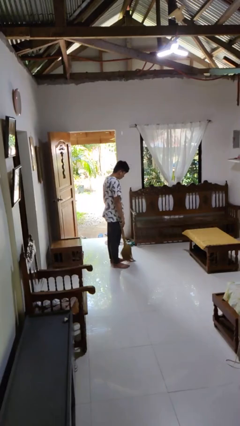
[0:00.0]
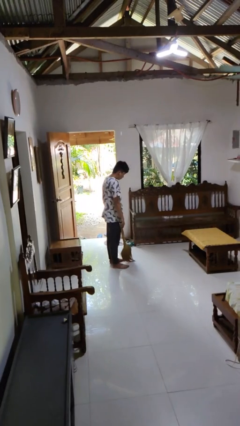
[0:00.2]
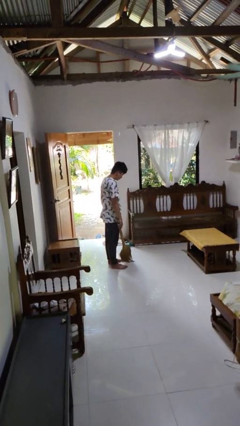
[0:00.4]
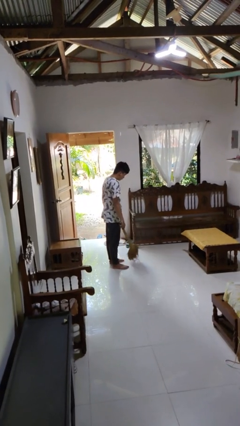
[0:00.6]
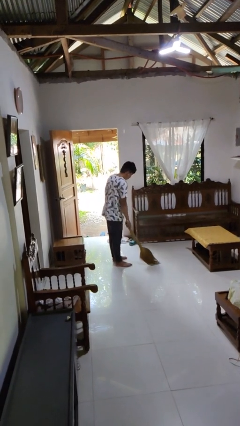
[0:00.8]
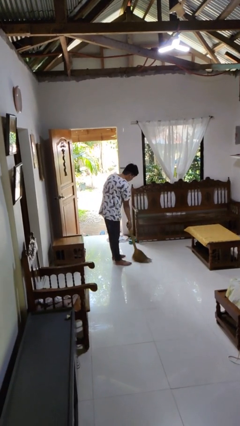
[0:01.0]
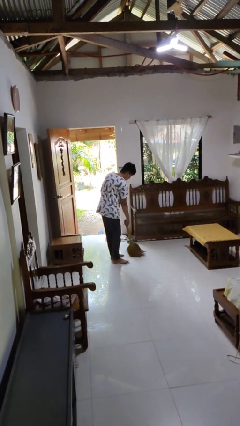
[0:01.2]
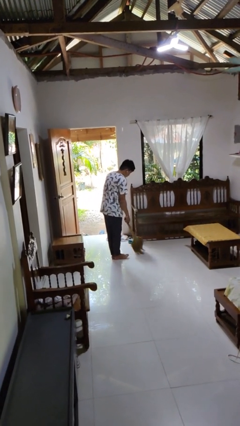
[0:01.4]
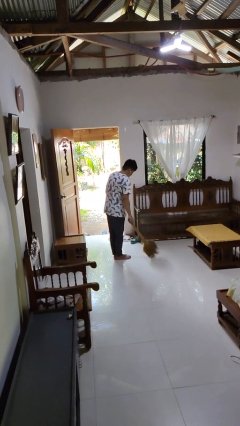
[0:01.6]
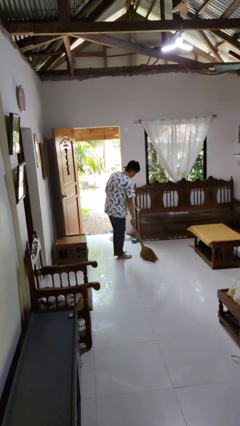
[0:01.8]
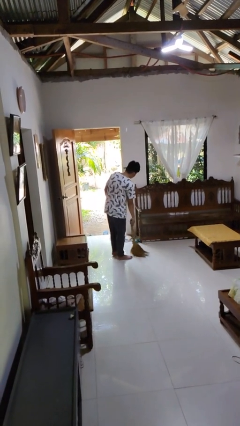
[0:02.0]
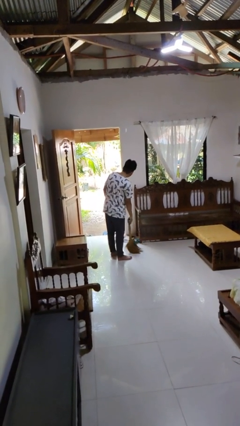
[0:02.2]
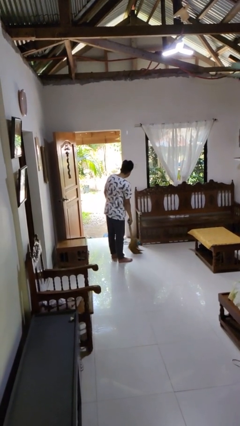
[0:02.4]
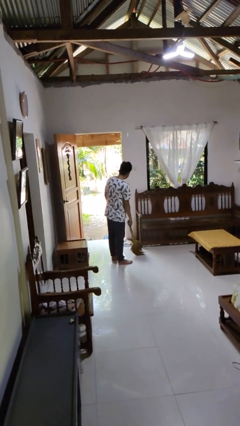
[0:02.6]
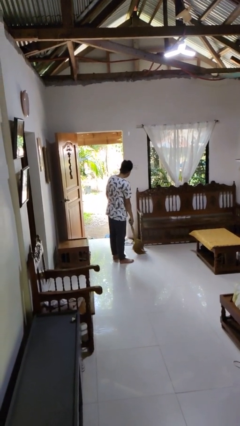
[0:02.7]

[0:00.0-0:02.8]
person sweeps floor

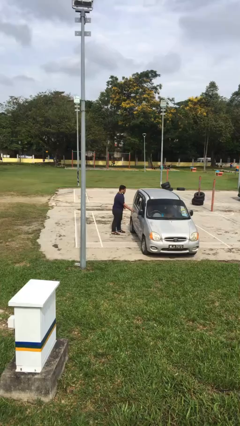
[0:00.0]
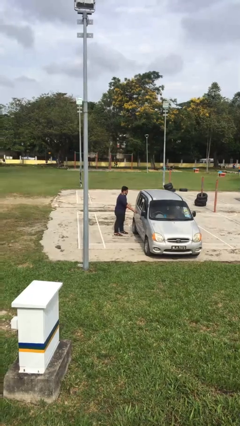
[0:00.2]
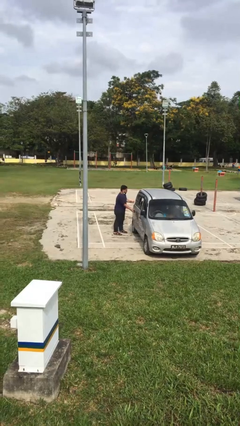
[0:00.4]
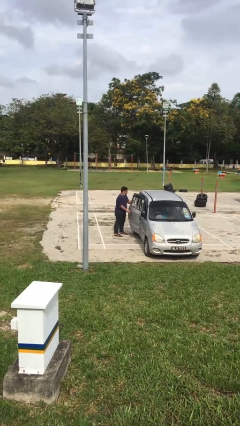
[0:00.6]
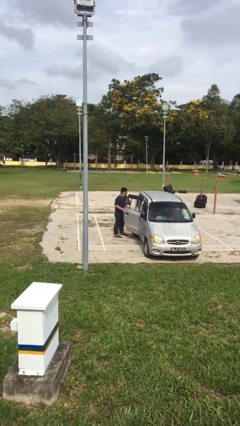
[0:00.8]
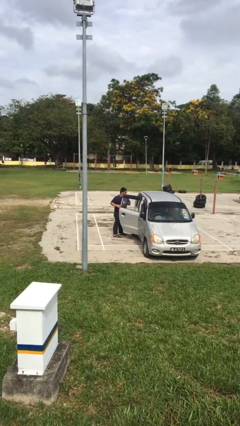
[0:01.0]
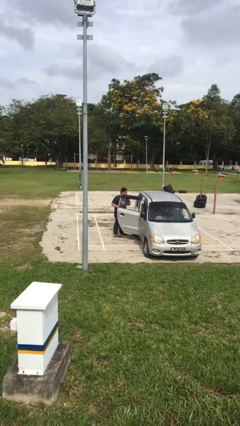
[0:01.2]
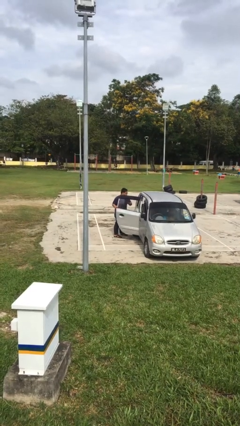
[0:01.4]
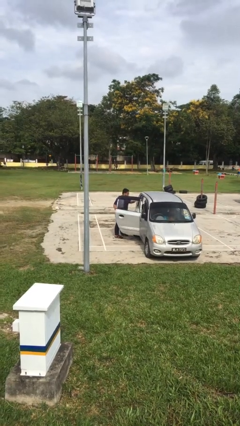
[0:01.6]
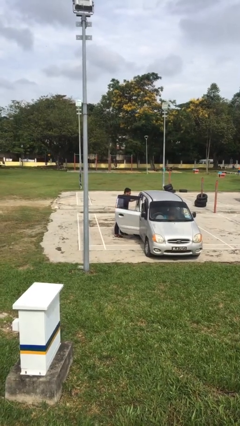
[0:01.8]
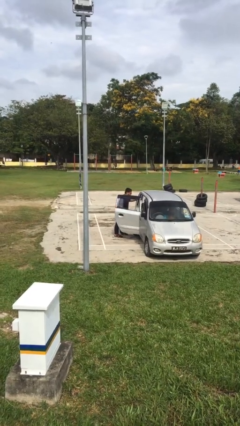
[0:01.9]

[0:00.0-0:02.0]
person opens car door

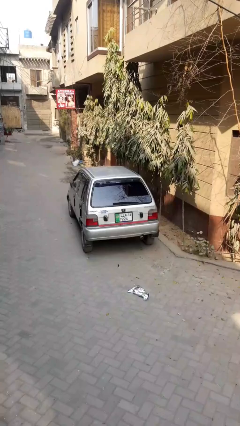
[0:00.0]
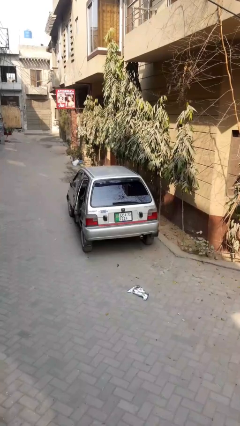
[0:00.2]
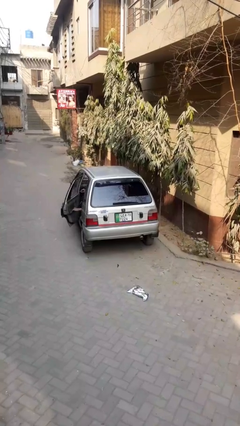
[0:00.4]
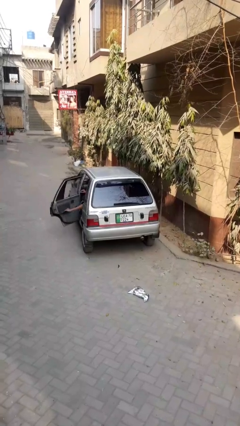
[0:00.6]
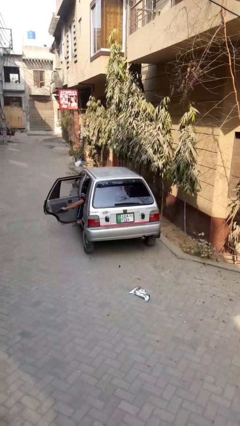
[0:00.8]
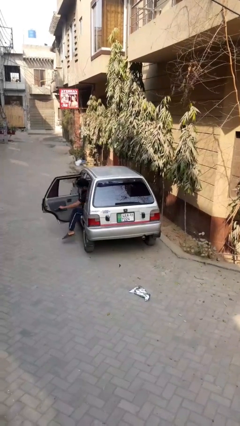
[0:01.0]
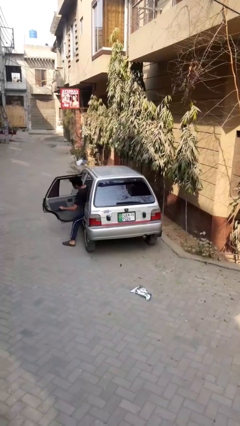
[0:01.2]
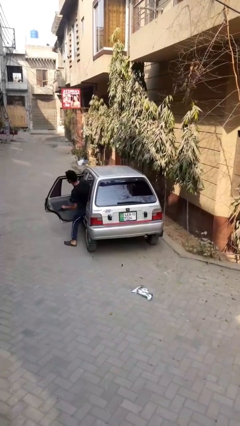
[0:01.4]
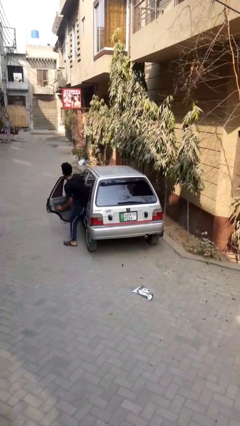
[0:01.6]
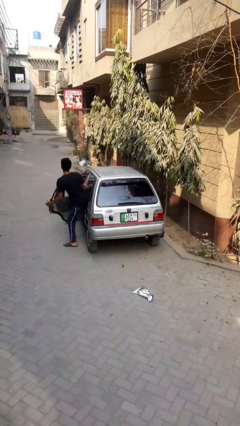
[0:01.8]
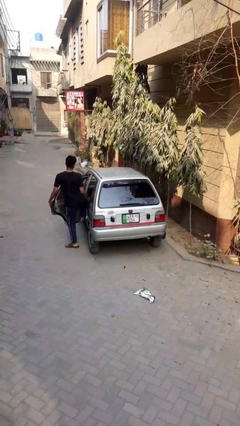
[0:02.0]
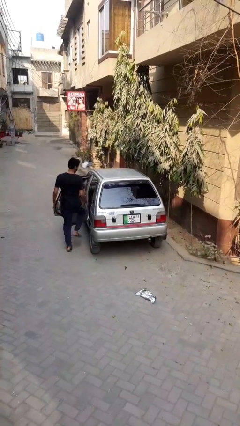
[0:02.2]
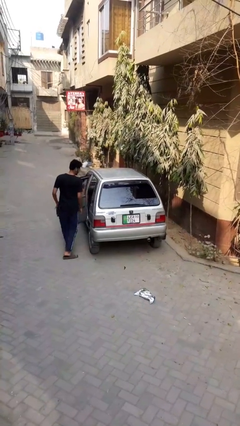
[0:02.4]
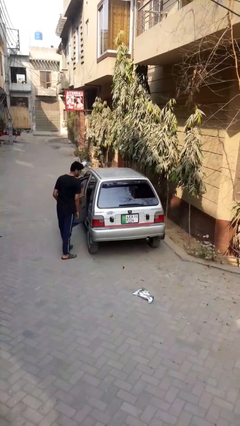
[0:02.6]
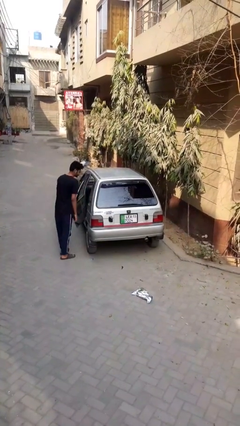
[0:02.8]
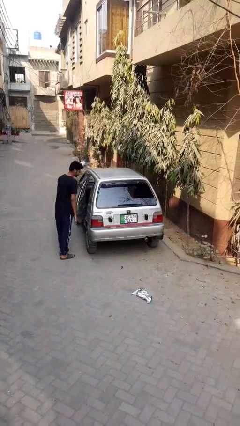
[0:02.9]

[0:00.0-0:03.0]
car drops off person

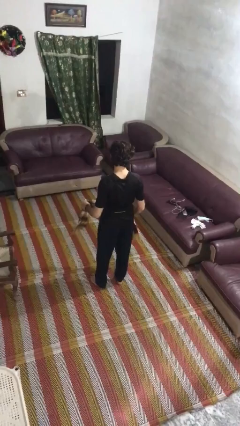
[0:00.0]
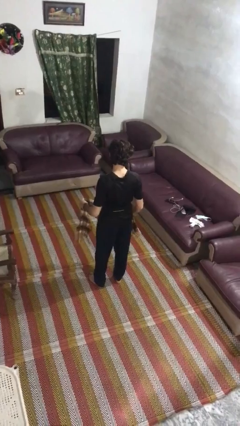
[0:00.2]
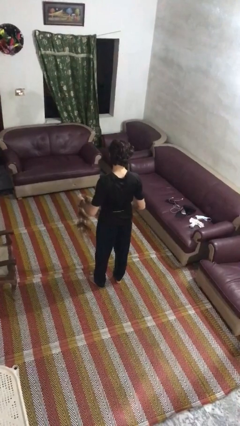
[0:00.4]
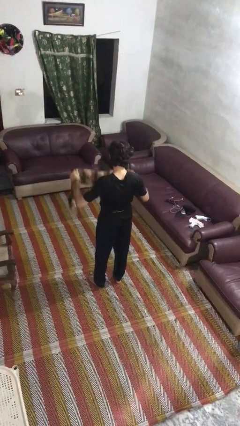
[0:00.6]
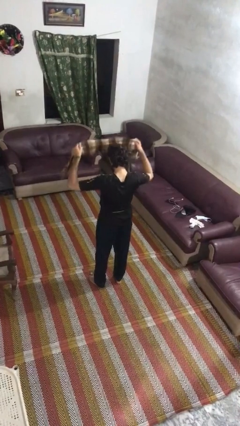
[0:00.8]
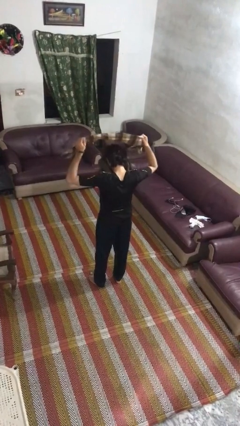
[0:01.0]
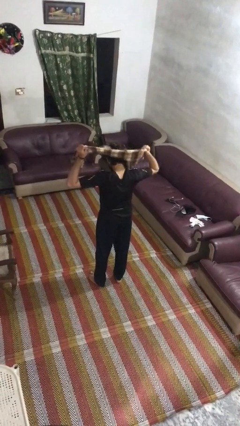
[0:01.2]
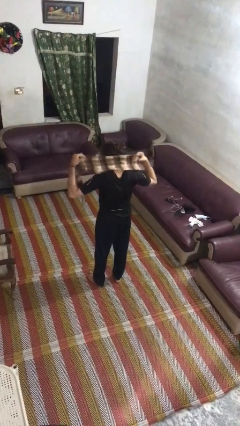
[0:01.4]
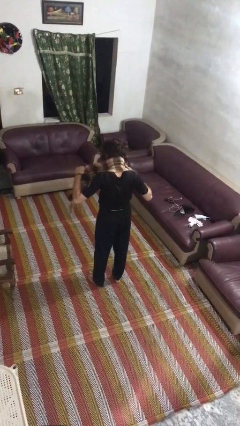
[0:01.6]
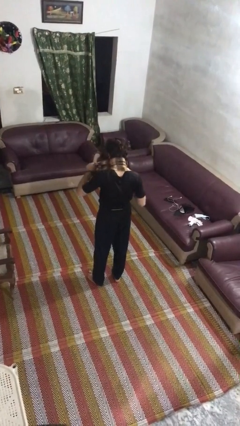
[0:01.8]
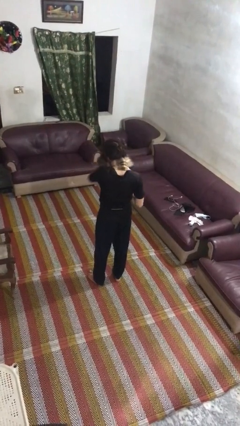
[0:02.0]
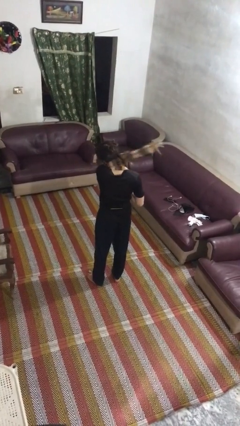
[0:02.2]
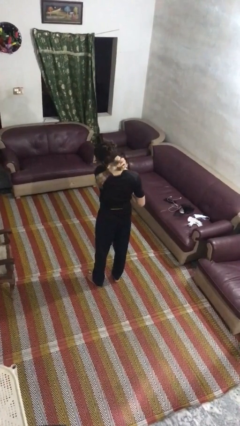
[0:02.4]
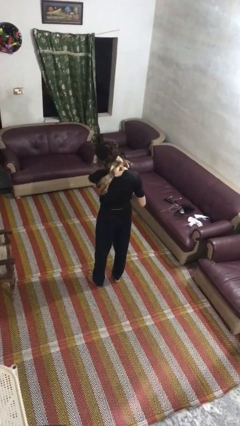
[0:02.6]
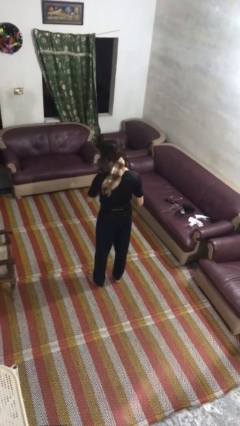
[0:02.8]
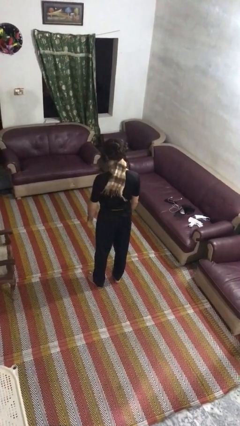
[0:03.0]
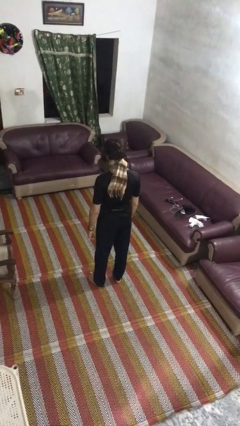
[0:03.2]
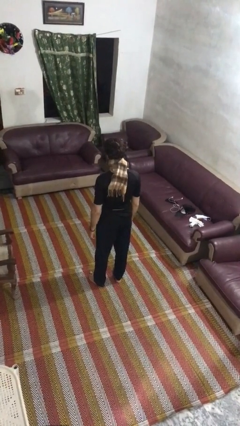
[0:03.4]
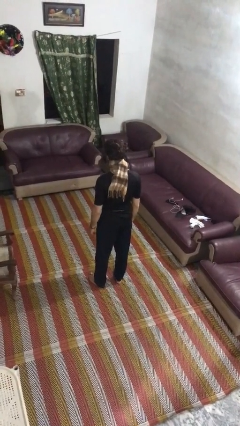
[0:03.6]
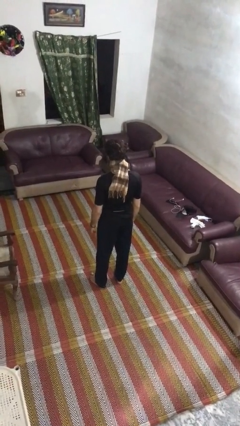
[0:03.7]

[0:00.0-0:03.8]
person puts on scarf

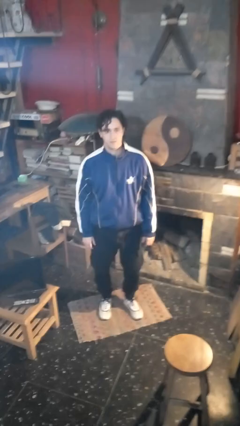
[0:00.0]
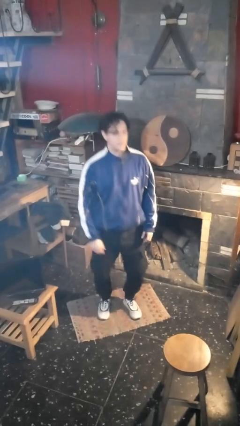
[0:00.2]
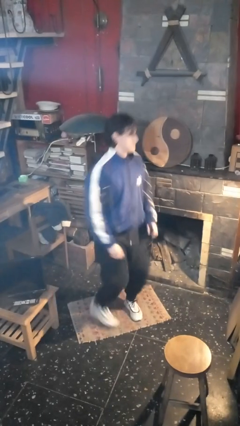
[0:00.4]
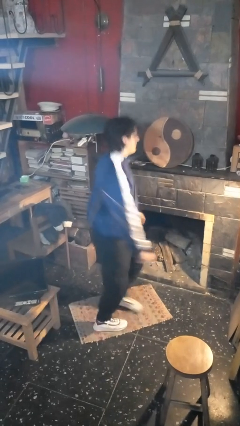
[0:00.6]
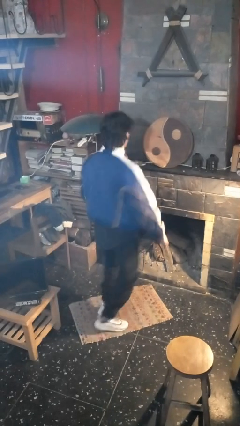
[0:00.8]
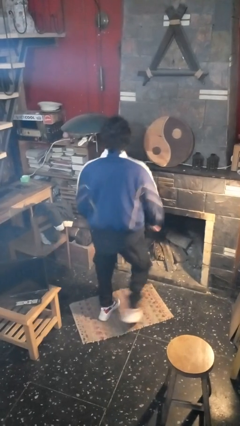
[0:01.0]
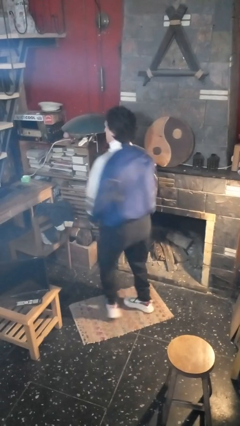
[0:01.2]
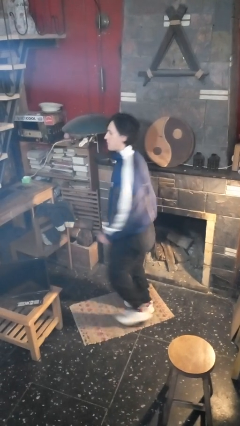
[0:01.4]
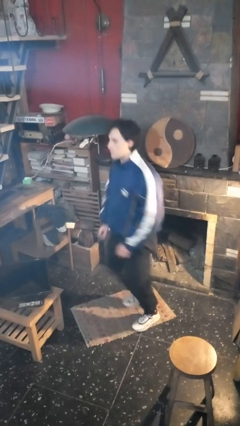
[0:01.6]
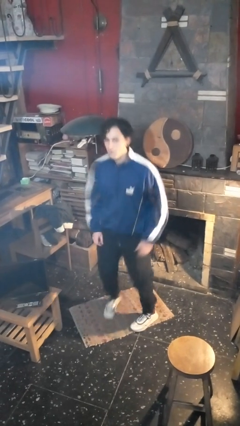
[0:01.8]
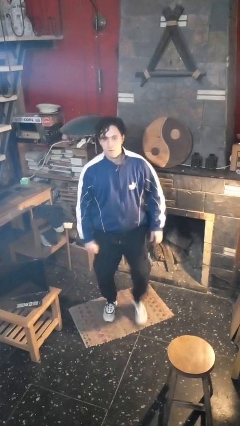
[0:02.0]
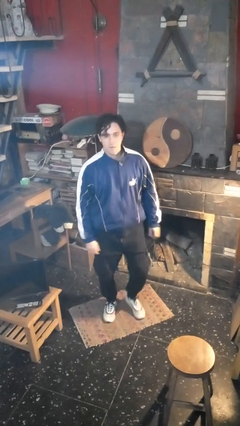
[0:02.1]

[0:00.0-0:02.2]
person twirls

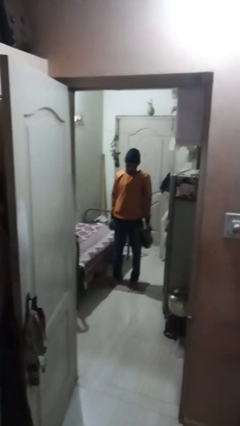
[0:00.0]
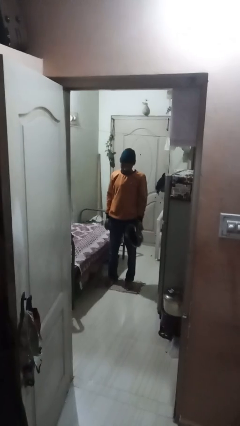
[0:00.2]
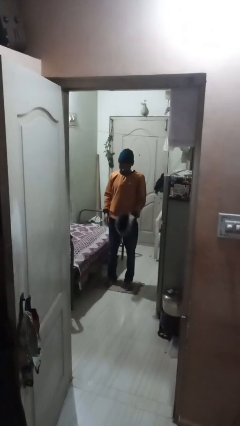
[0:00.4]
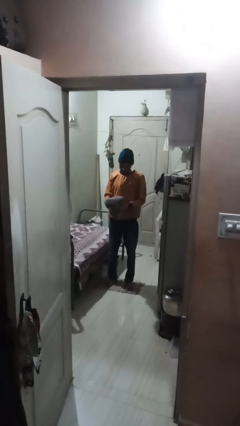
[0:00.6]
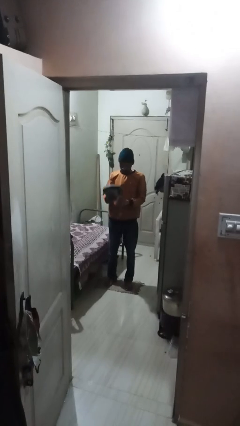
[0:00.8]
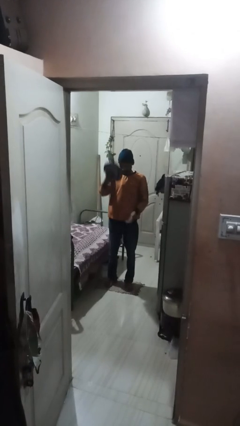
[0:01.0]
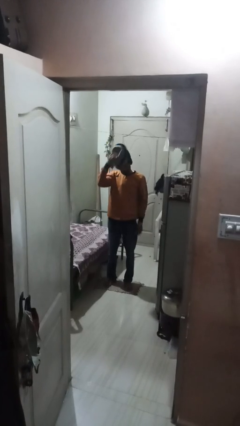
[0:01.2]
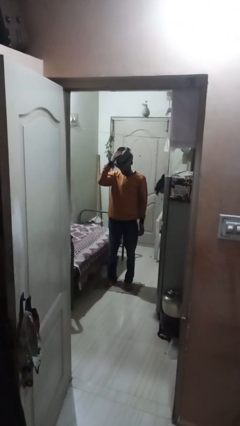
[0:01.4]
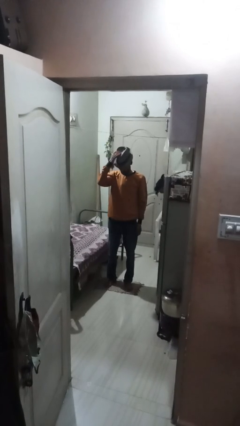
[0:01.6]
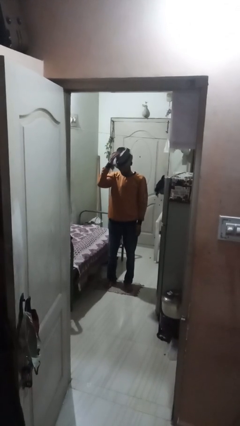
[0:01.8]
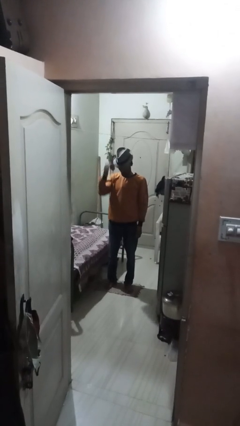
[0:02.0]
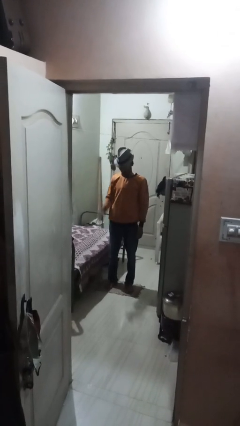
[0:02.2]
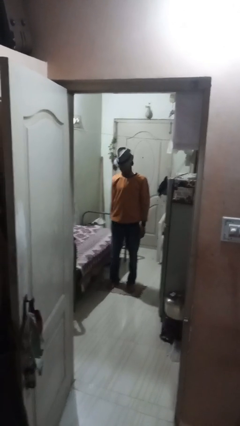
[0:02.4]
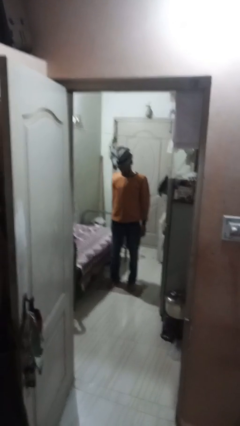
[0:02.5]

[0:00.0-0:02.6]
person puts on hat

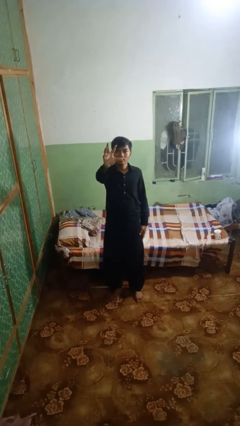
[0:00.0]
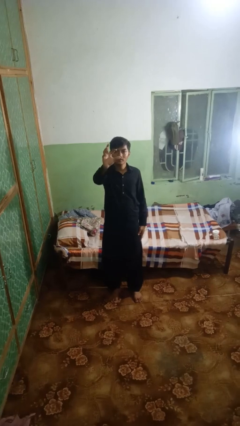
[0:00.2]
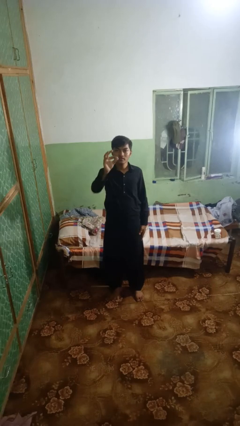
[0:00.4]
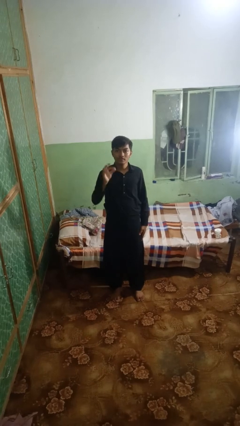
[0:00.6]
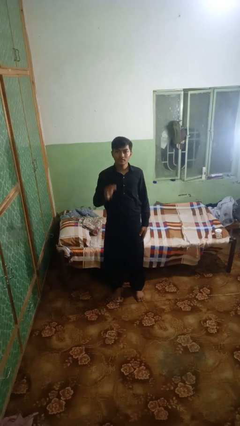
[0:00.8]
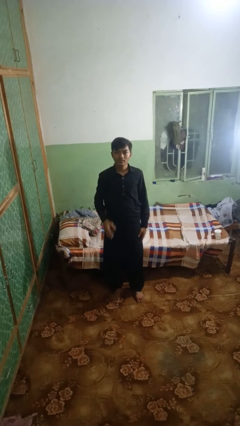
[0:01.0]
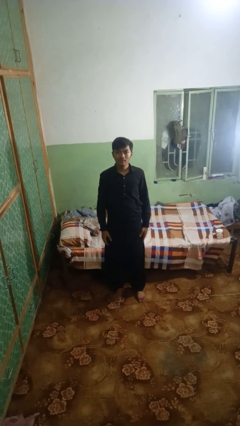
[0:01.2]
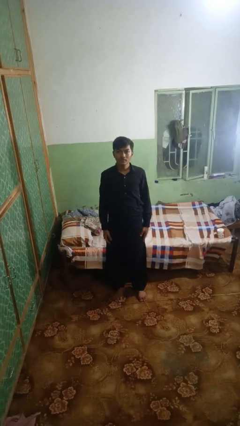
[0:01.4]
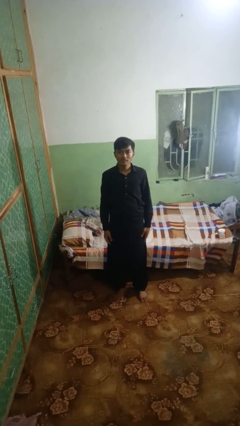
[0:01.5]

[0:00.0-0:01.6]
person gestures zoom out
